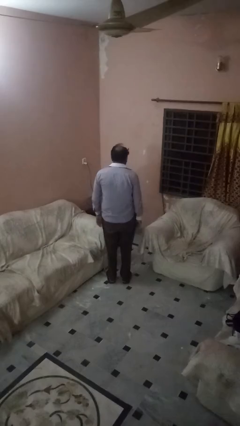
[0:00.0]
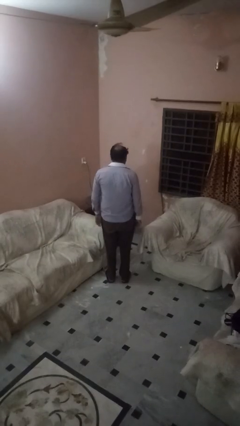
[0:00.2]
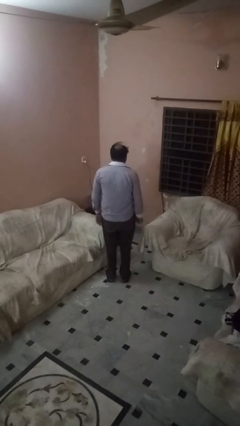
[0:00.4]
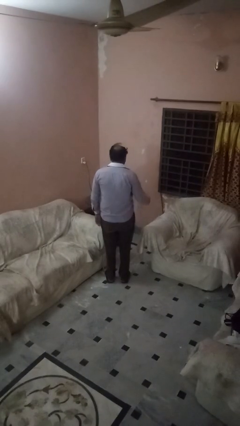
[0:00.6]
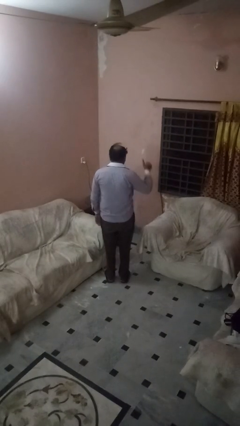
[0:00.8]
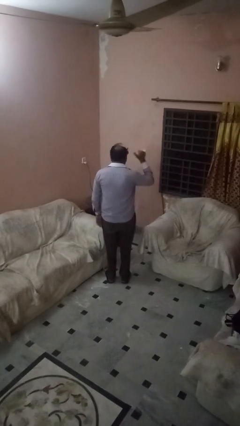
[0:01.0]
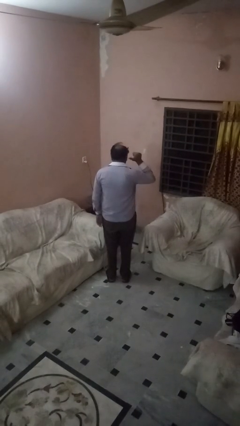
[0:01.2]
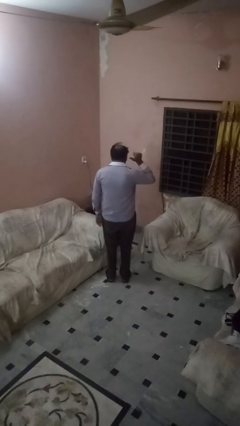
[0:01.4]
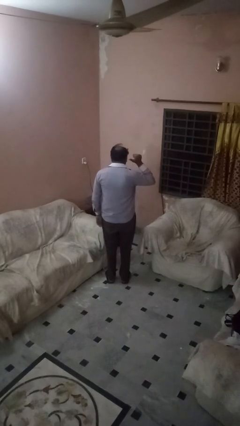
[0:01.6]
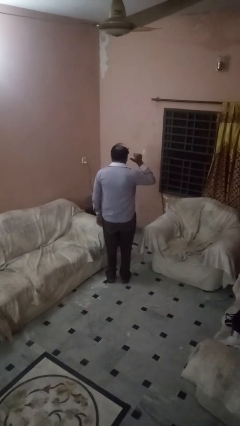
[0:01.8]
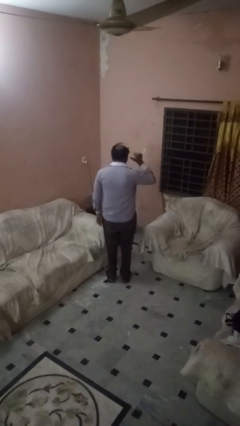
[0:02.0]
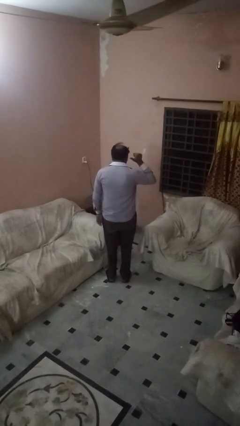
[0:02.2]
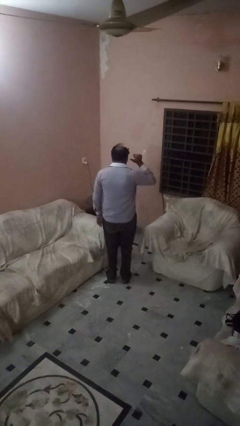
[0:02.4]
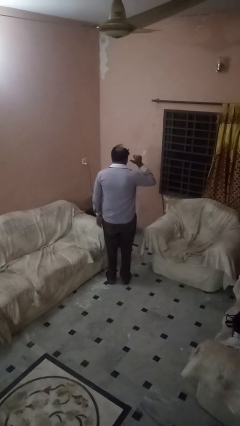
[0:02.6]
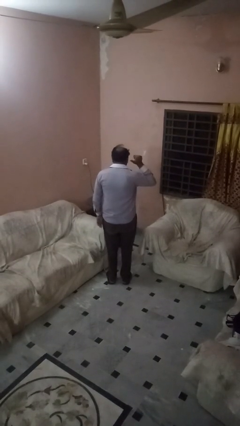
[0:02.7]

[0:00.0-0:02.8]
person gestures behind me

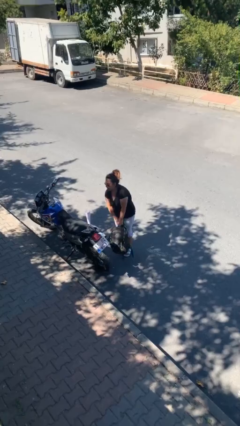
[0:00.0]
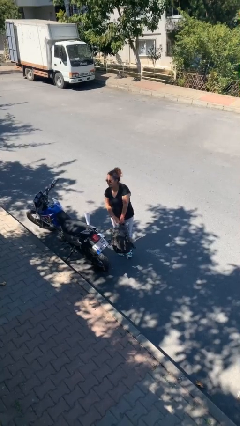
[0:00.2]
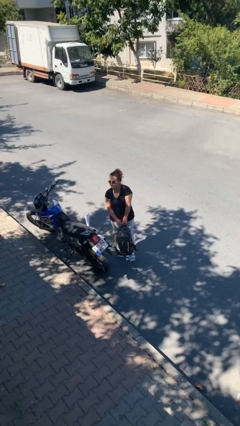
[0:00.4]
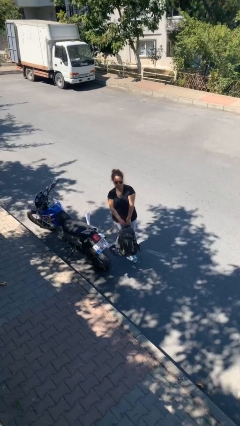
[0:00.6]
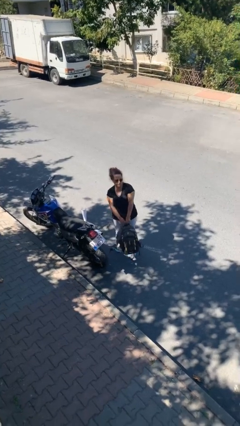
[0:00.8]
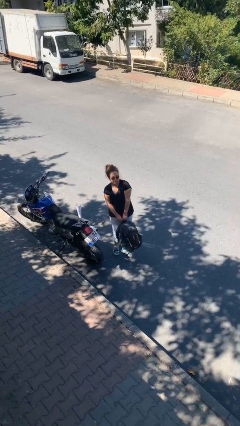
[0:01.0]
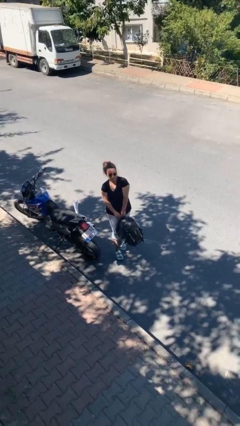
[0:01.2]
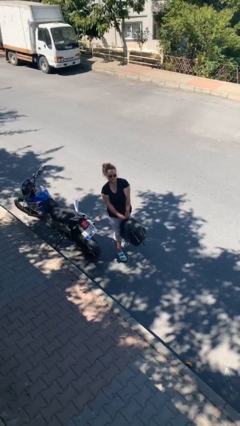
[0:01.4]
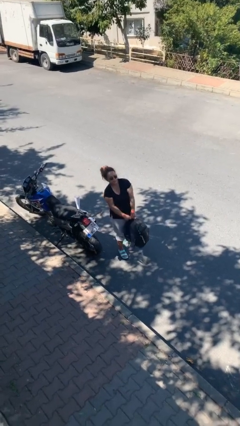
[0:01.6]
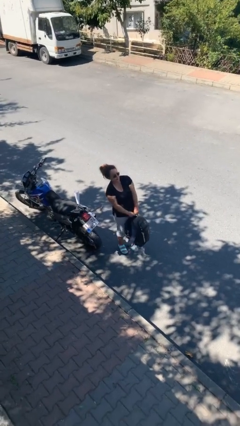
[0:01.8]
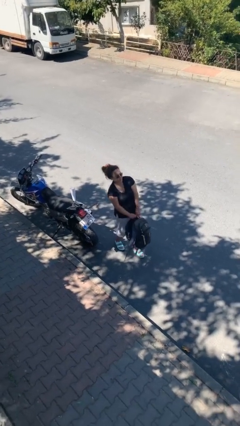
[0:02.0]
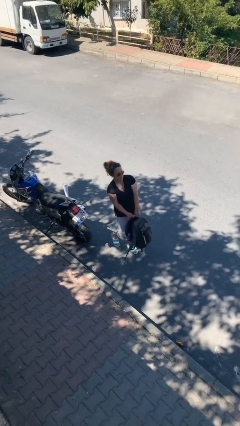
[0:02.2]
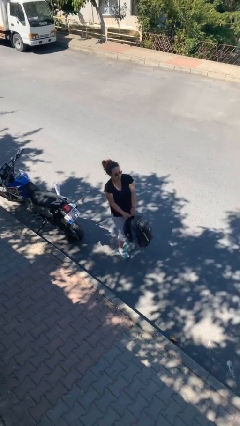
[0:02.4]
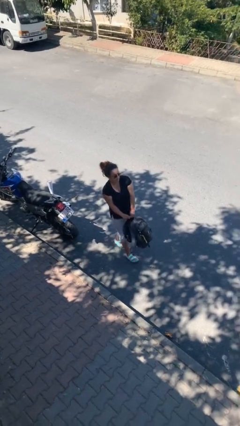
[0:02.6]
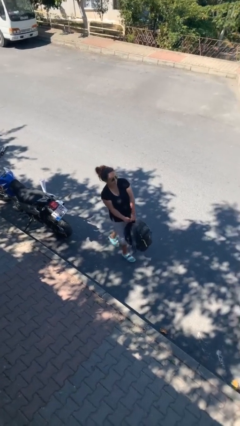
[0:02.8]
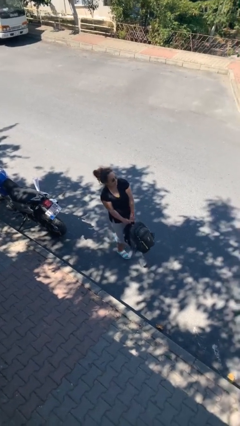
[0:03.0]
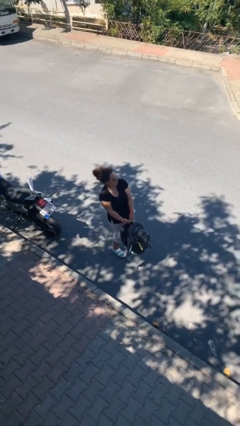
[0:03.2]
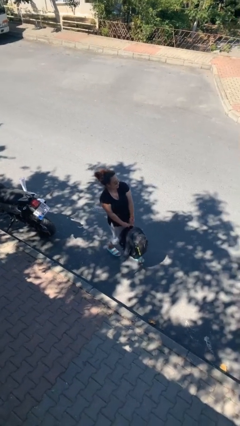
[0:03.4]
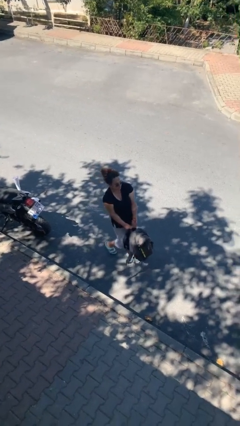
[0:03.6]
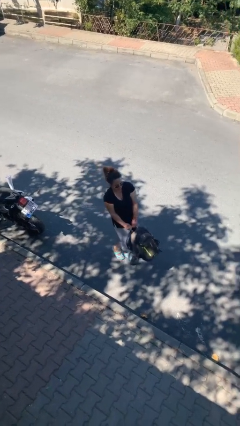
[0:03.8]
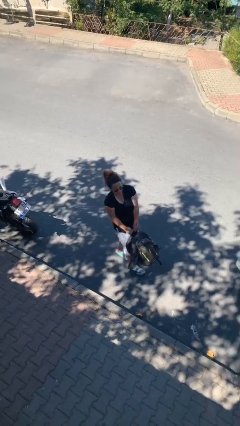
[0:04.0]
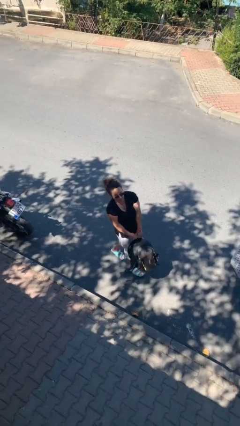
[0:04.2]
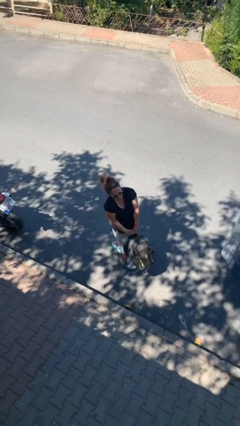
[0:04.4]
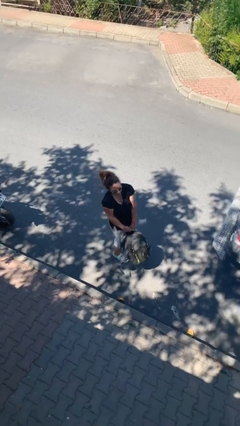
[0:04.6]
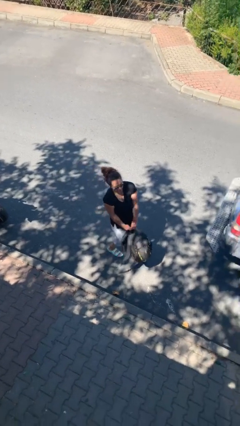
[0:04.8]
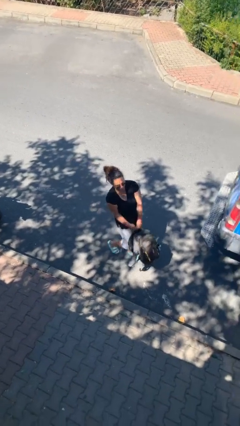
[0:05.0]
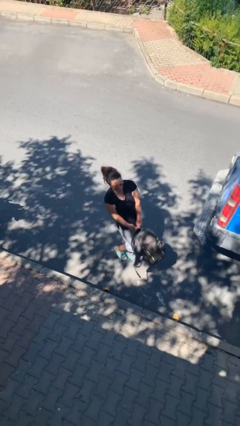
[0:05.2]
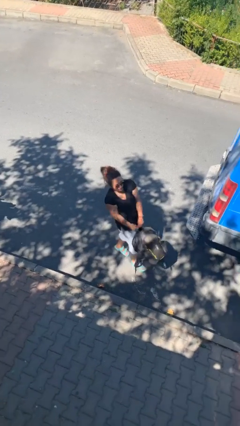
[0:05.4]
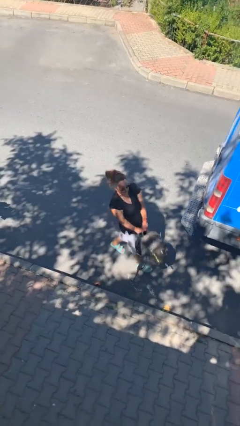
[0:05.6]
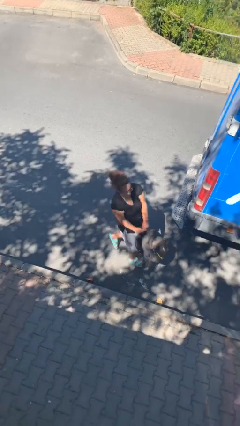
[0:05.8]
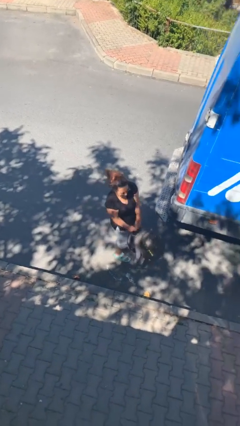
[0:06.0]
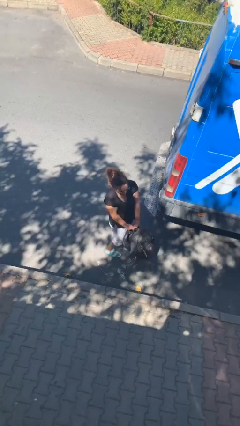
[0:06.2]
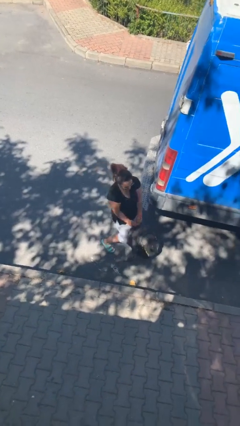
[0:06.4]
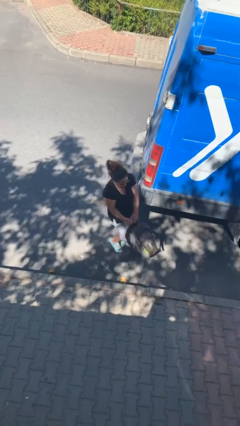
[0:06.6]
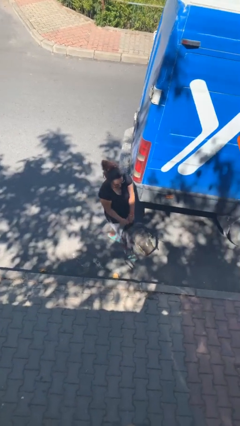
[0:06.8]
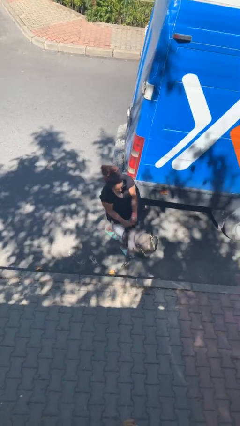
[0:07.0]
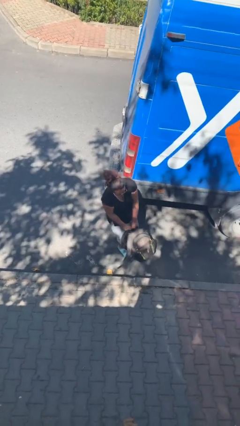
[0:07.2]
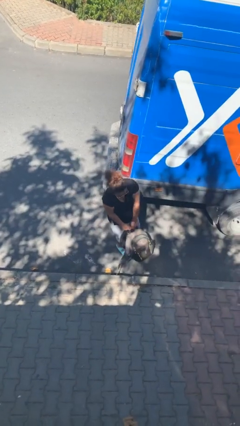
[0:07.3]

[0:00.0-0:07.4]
person carries heavy object

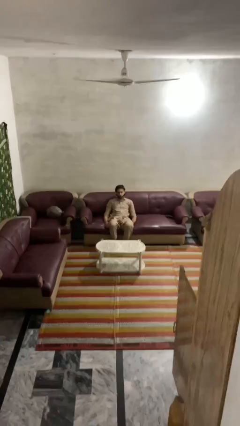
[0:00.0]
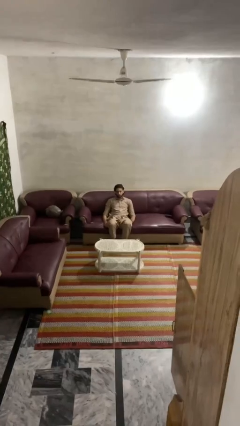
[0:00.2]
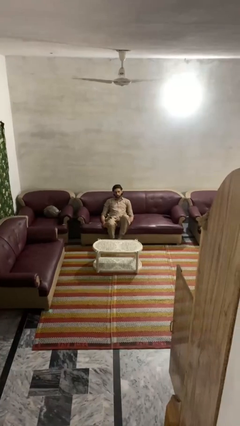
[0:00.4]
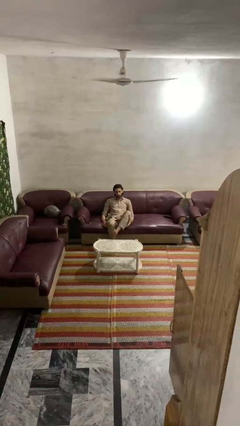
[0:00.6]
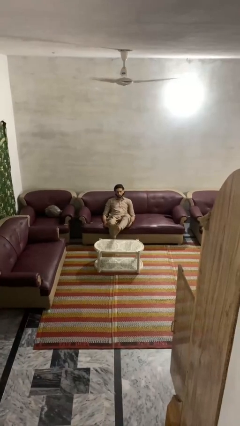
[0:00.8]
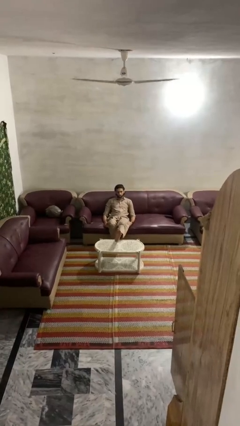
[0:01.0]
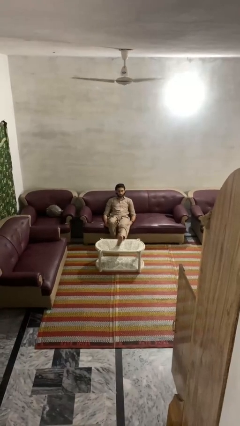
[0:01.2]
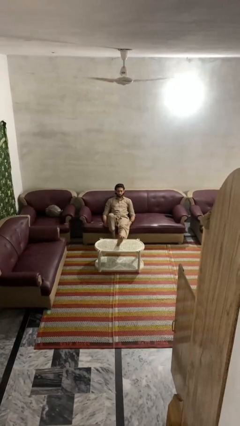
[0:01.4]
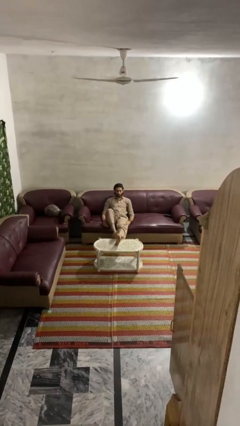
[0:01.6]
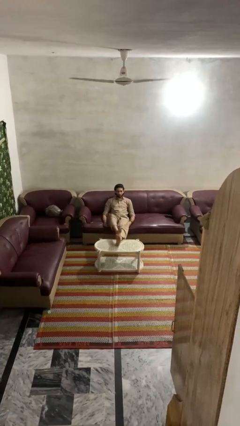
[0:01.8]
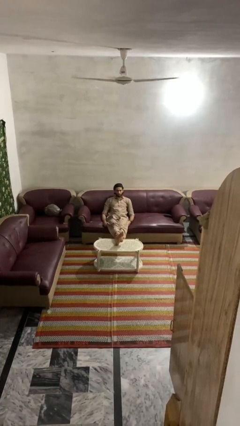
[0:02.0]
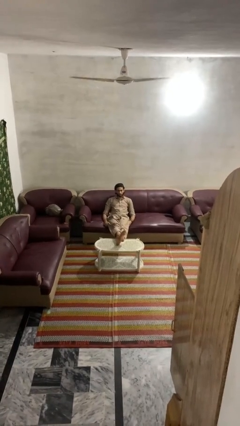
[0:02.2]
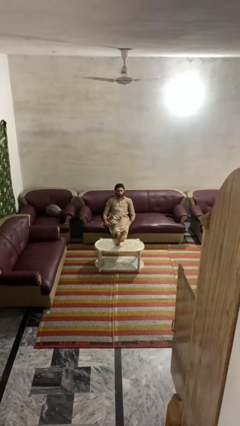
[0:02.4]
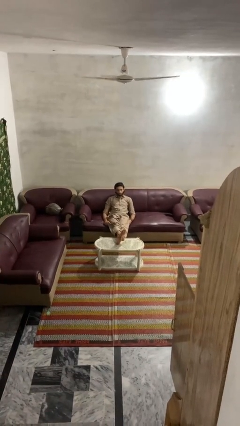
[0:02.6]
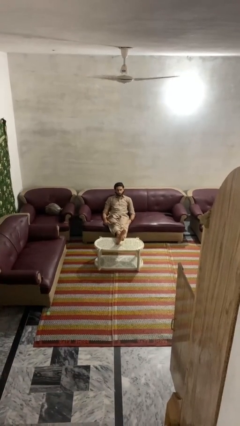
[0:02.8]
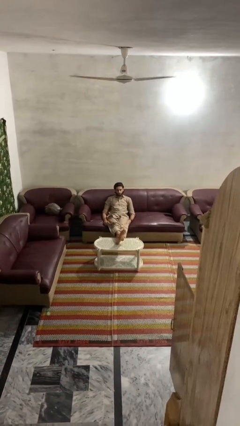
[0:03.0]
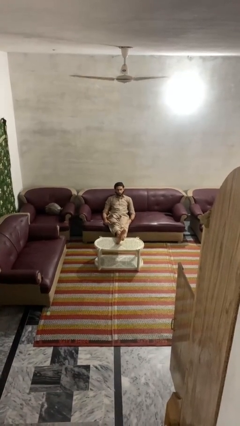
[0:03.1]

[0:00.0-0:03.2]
person puts feet up

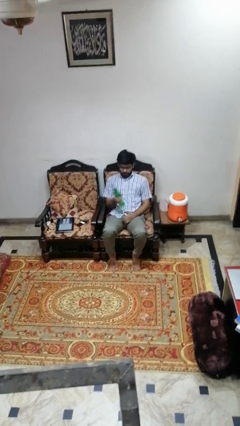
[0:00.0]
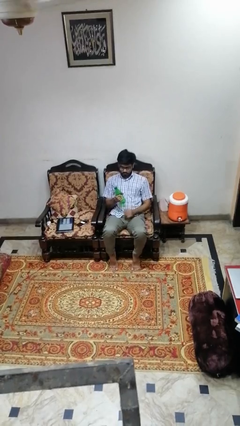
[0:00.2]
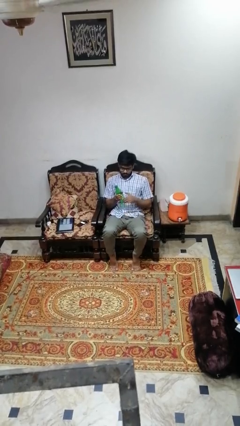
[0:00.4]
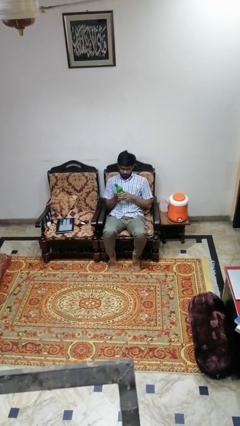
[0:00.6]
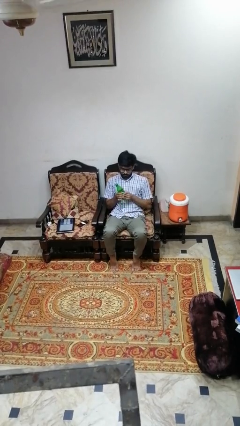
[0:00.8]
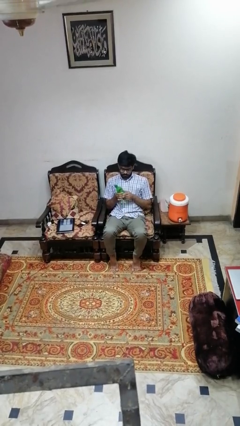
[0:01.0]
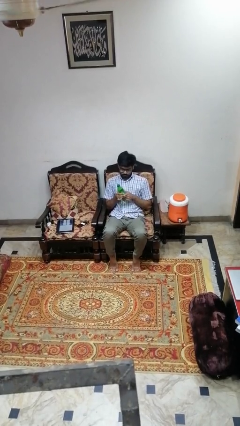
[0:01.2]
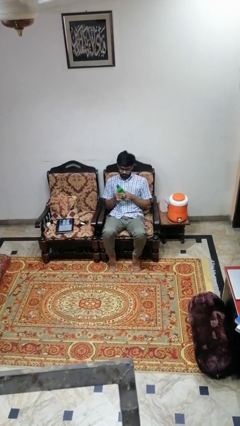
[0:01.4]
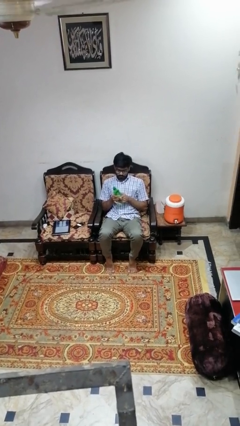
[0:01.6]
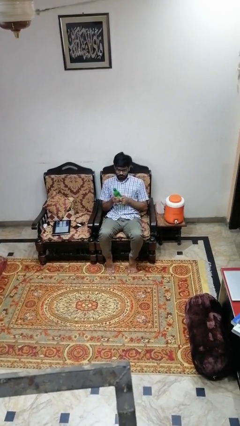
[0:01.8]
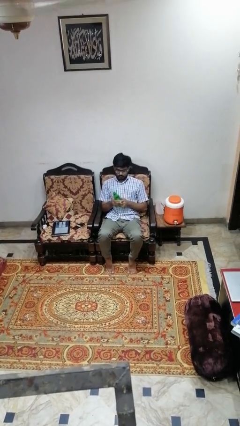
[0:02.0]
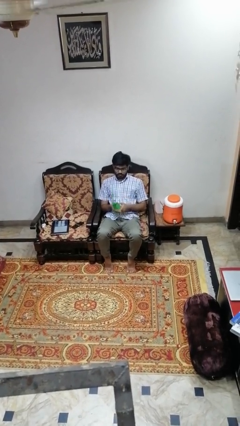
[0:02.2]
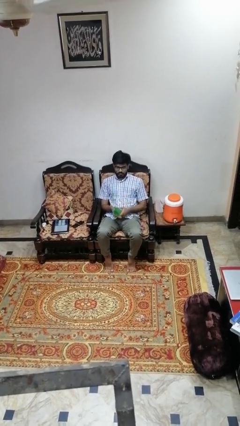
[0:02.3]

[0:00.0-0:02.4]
person squeezes object

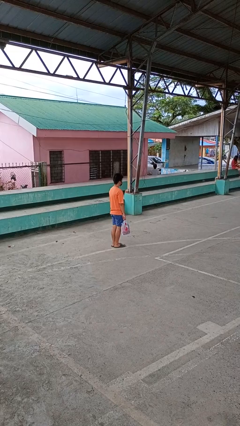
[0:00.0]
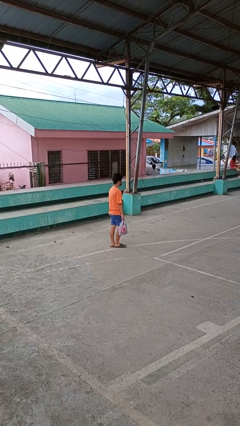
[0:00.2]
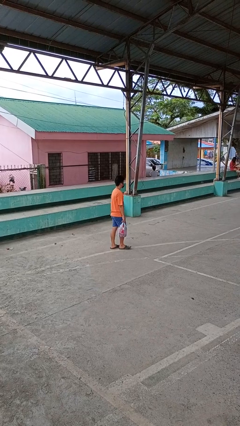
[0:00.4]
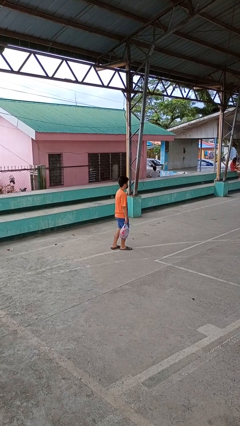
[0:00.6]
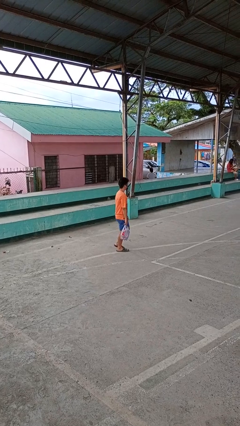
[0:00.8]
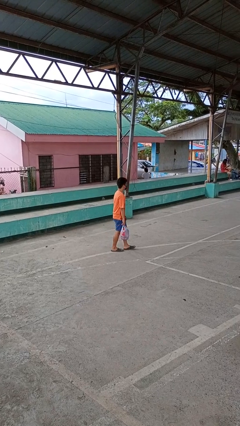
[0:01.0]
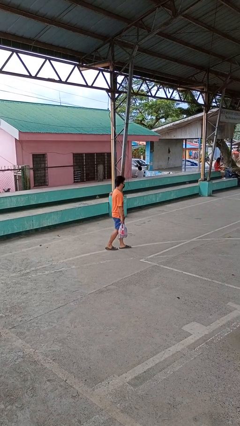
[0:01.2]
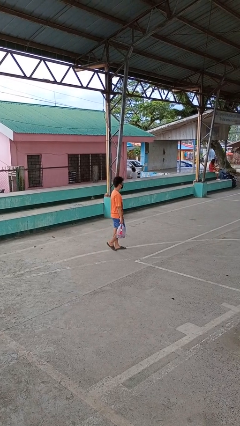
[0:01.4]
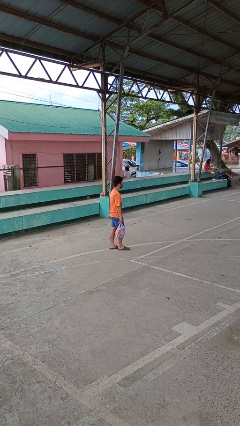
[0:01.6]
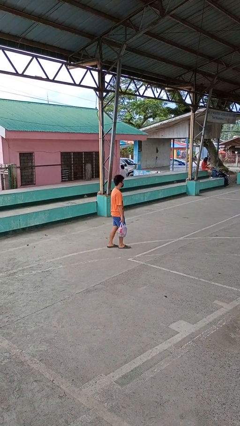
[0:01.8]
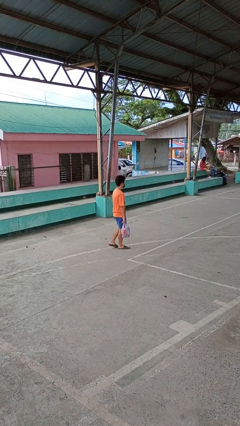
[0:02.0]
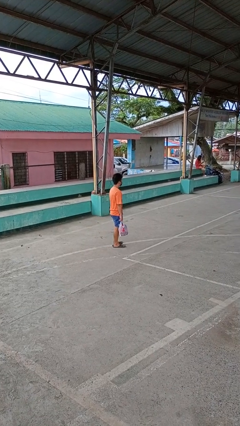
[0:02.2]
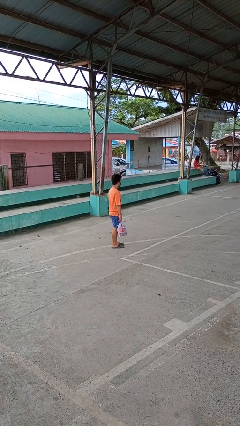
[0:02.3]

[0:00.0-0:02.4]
person carries groceries
